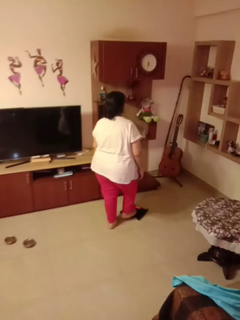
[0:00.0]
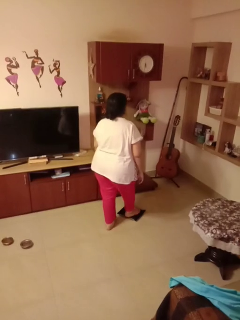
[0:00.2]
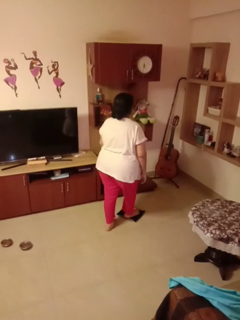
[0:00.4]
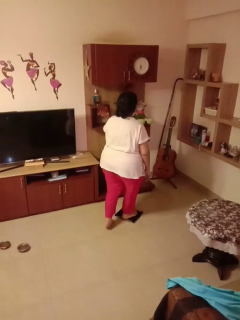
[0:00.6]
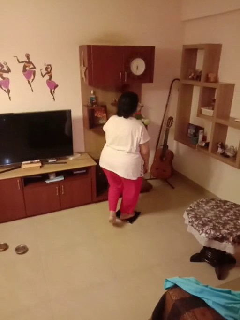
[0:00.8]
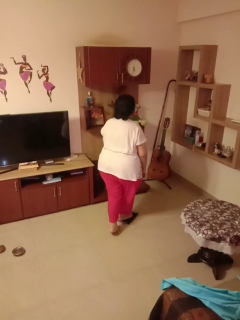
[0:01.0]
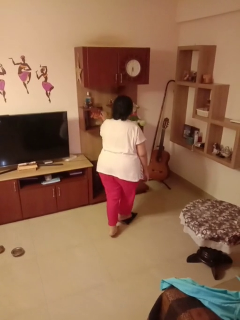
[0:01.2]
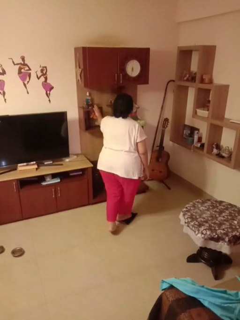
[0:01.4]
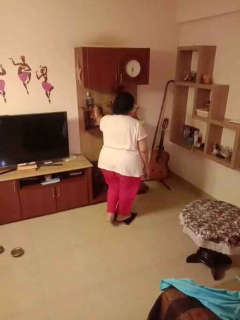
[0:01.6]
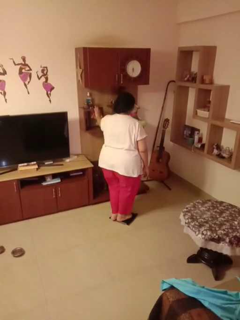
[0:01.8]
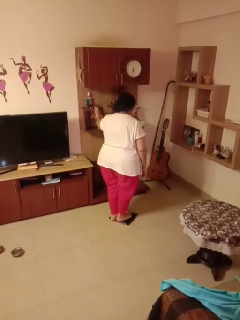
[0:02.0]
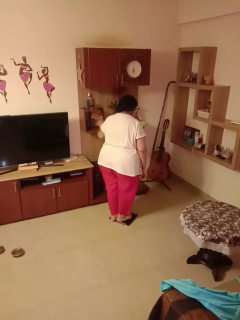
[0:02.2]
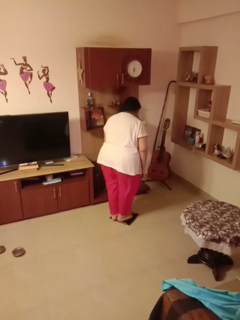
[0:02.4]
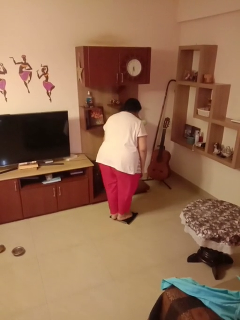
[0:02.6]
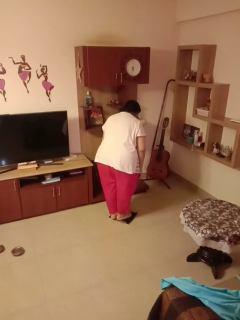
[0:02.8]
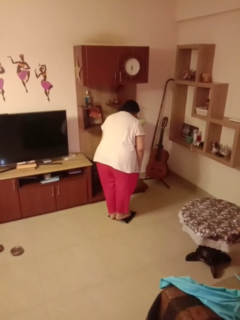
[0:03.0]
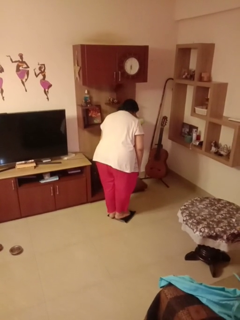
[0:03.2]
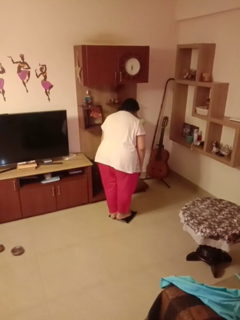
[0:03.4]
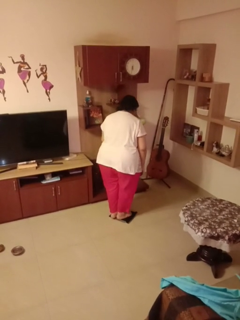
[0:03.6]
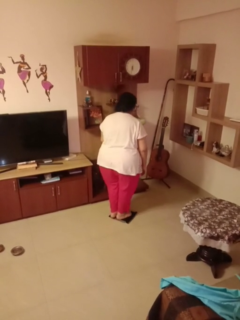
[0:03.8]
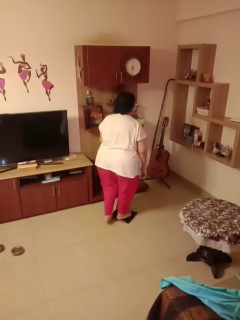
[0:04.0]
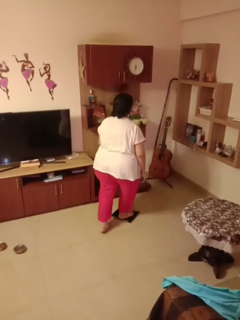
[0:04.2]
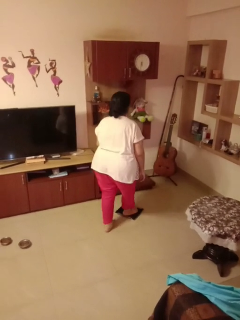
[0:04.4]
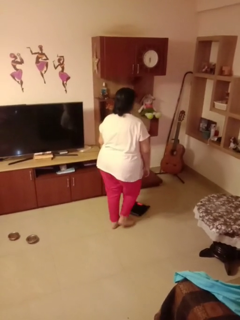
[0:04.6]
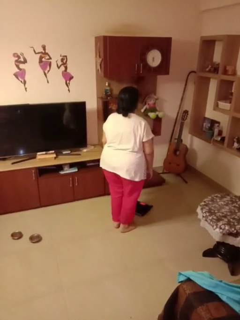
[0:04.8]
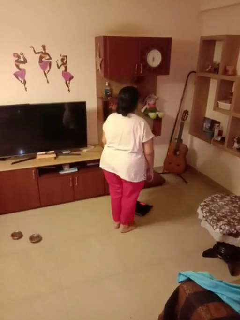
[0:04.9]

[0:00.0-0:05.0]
person uses bodyweight scale

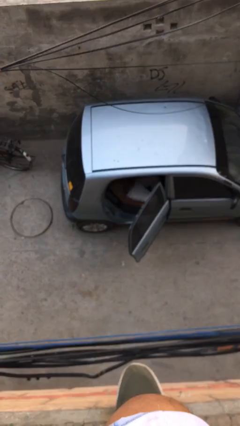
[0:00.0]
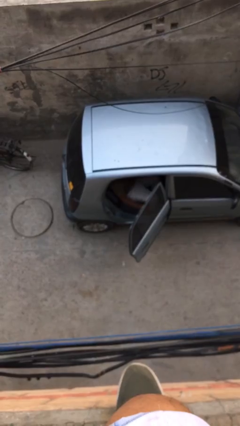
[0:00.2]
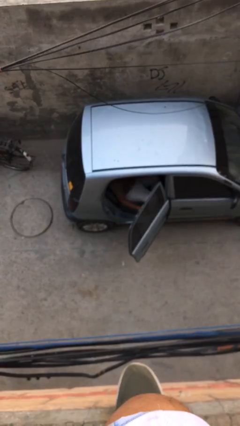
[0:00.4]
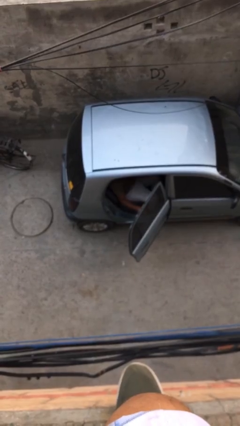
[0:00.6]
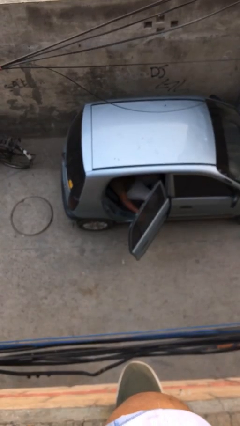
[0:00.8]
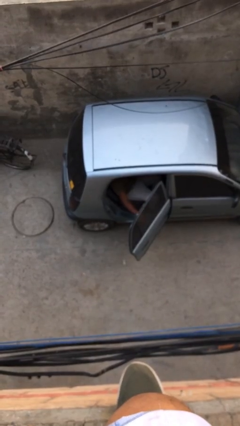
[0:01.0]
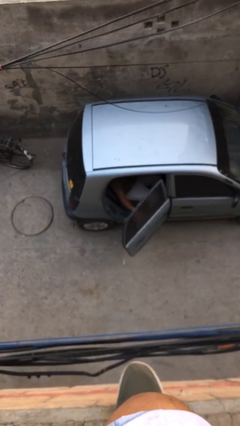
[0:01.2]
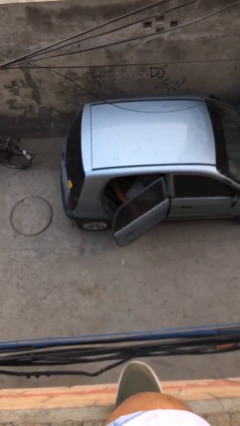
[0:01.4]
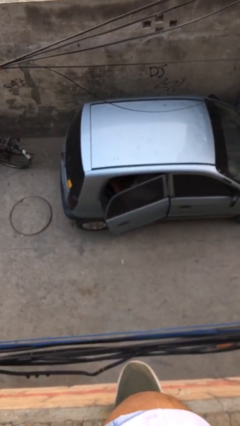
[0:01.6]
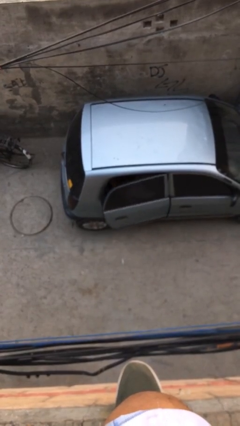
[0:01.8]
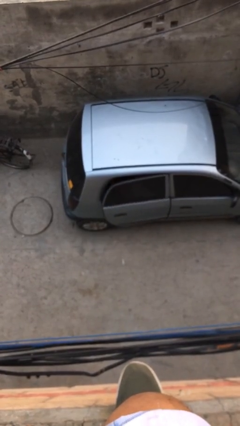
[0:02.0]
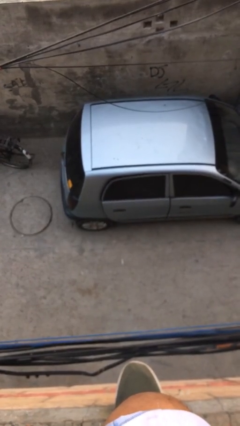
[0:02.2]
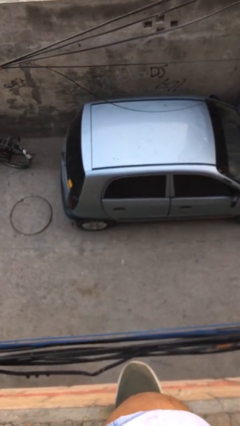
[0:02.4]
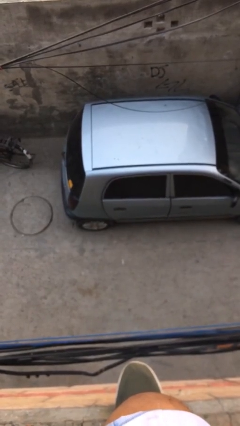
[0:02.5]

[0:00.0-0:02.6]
person closes car door

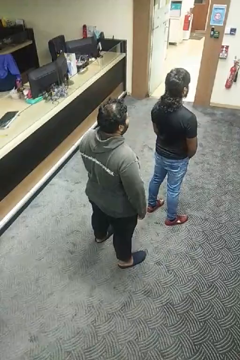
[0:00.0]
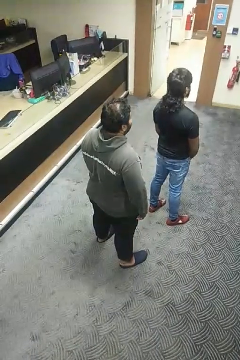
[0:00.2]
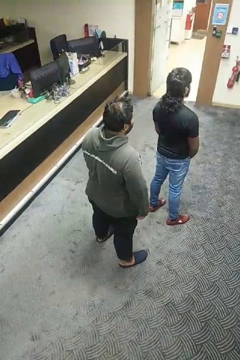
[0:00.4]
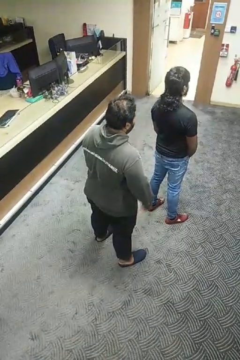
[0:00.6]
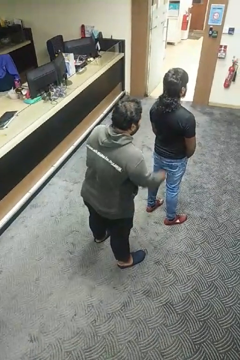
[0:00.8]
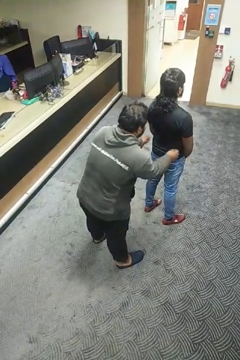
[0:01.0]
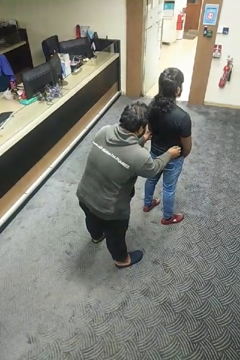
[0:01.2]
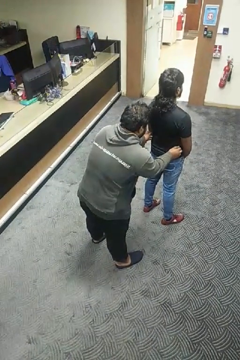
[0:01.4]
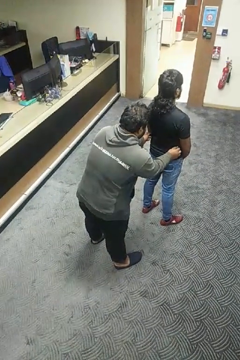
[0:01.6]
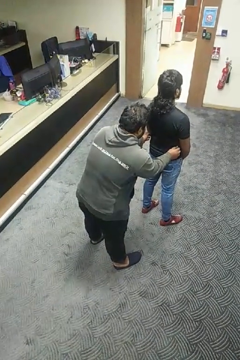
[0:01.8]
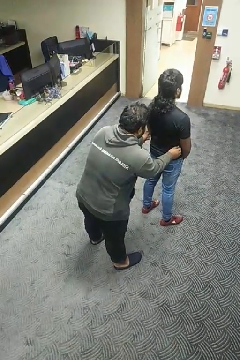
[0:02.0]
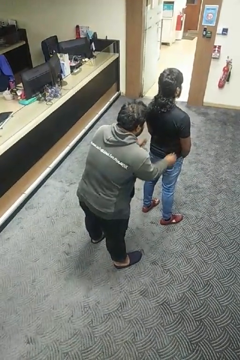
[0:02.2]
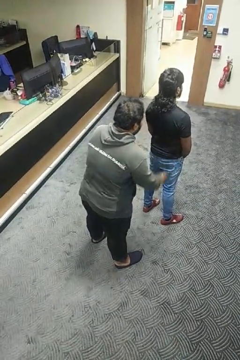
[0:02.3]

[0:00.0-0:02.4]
person tickles person

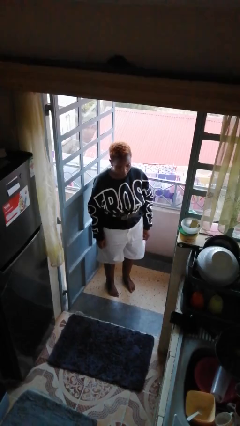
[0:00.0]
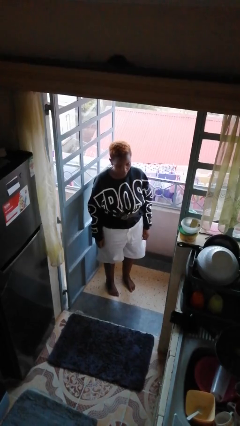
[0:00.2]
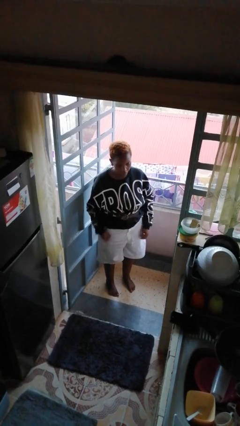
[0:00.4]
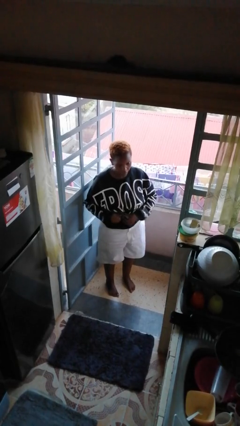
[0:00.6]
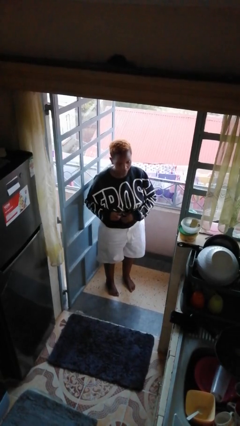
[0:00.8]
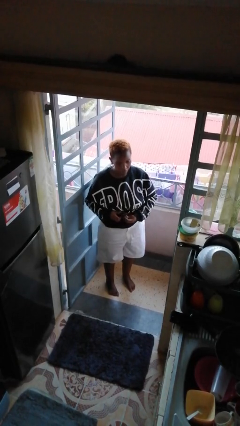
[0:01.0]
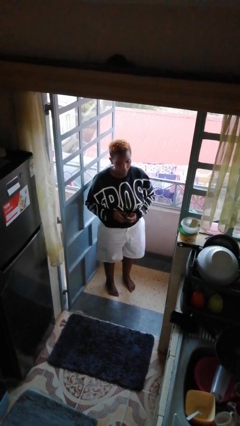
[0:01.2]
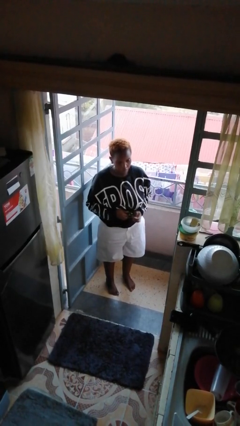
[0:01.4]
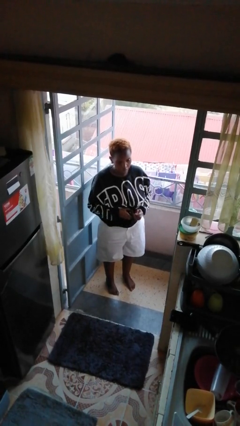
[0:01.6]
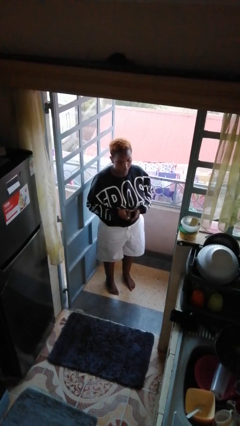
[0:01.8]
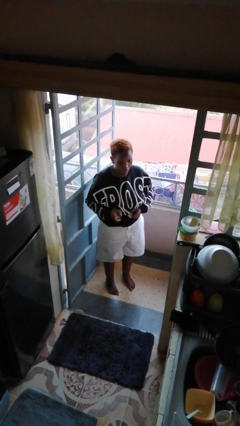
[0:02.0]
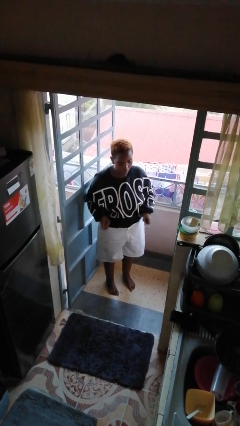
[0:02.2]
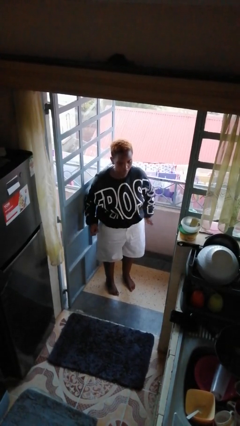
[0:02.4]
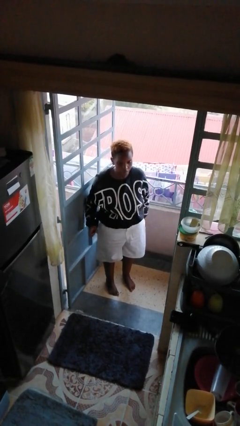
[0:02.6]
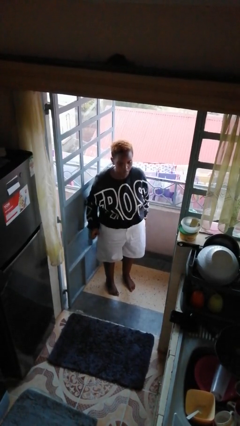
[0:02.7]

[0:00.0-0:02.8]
person takes off belt

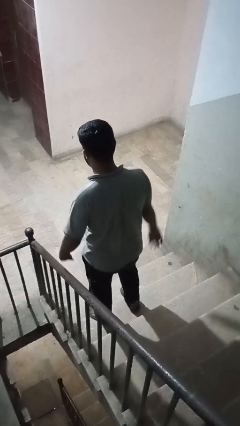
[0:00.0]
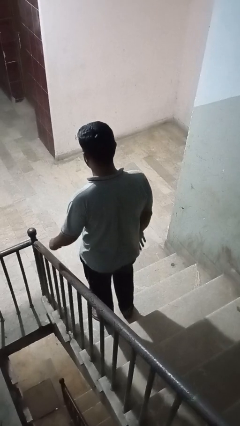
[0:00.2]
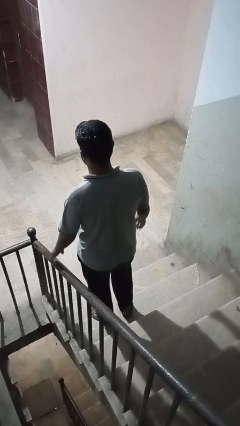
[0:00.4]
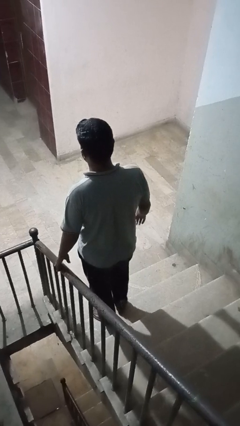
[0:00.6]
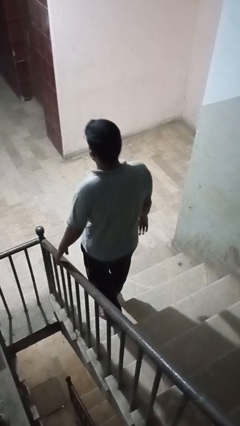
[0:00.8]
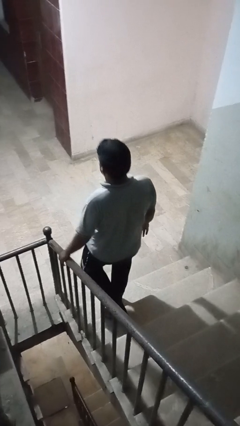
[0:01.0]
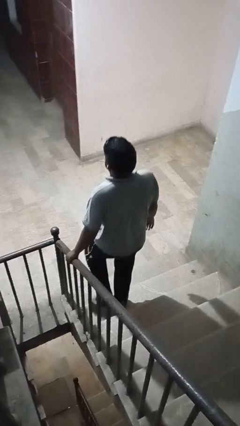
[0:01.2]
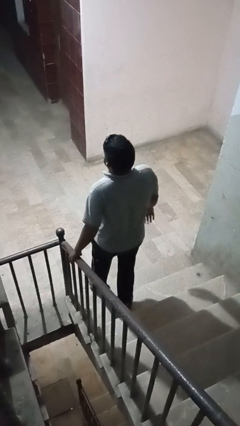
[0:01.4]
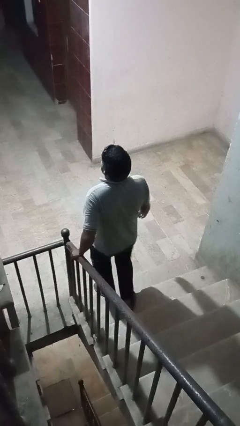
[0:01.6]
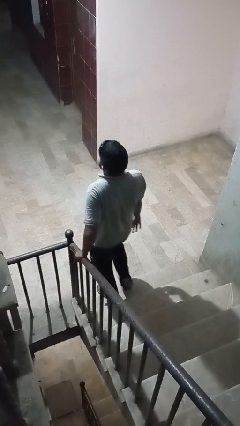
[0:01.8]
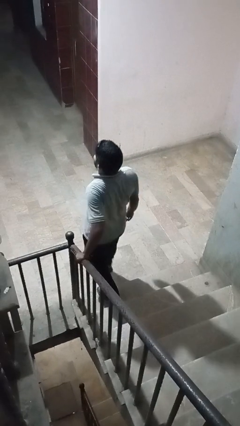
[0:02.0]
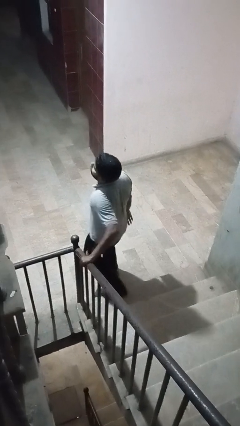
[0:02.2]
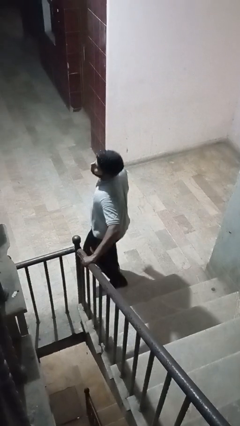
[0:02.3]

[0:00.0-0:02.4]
person climbs down stairs

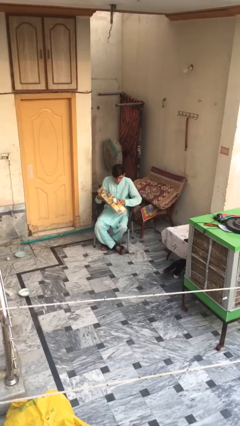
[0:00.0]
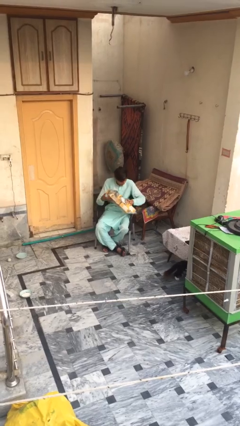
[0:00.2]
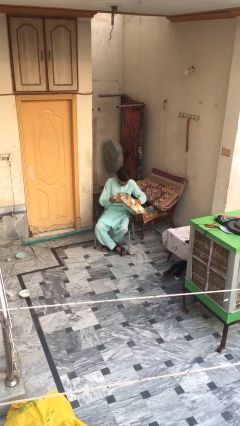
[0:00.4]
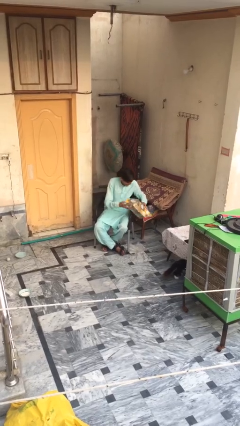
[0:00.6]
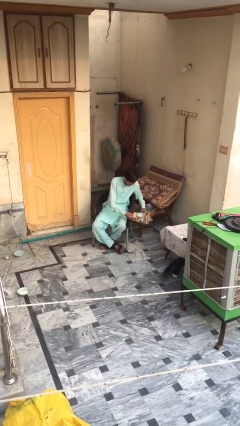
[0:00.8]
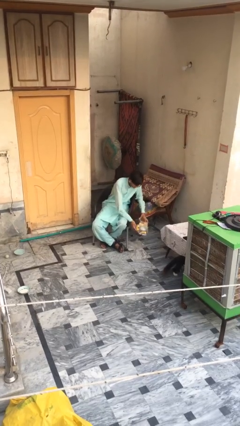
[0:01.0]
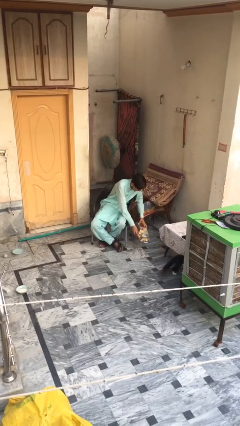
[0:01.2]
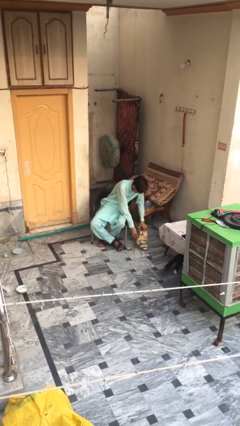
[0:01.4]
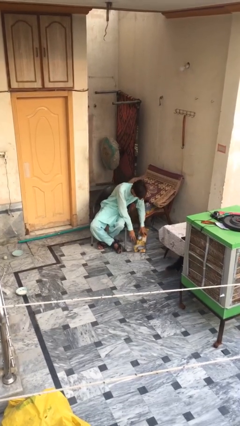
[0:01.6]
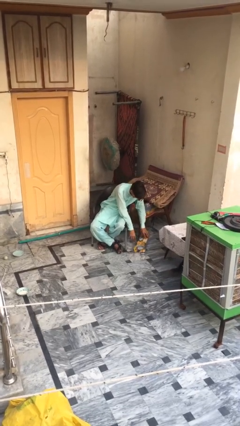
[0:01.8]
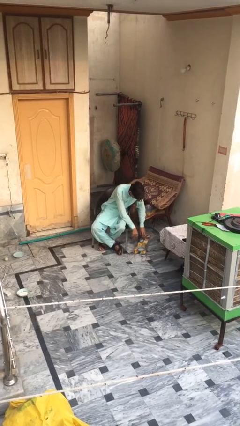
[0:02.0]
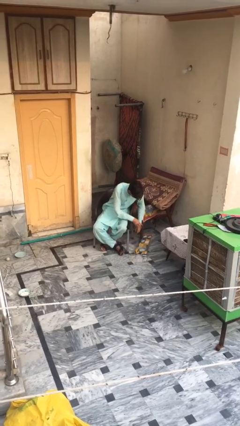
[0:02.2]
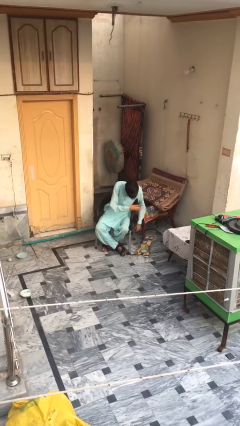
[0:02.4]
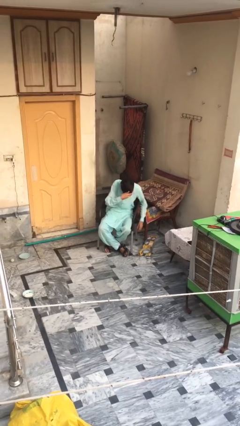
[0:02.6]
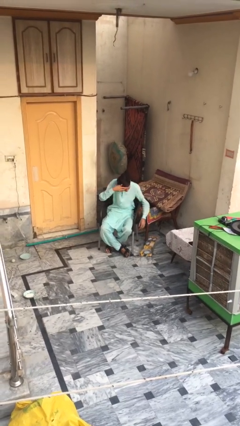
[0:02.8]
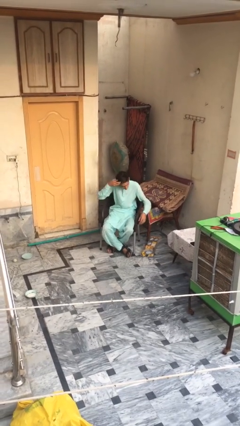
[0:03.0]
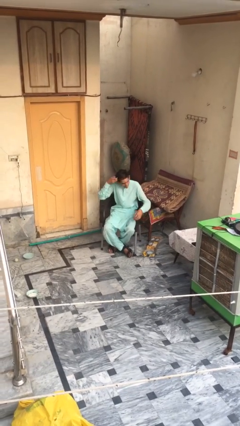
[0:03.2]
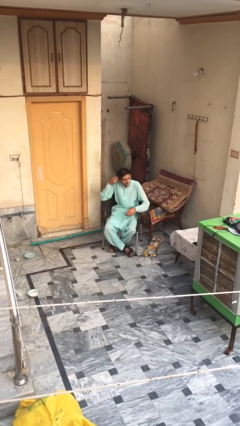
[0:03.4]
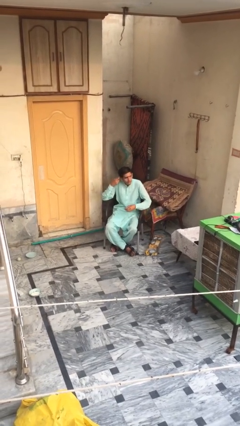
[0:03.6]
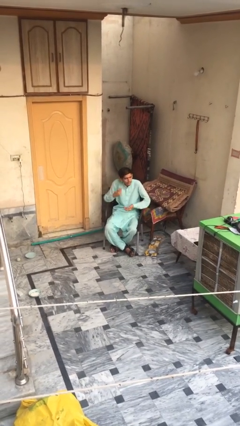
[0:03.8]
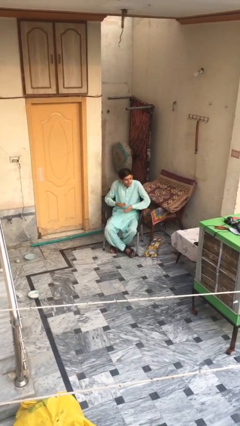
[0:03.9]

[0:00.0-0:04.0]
person puts down object on floor
